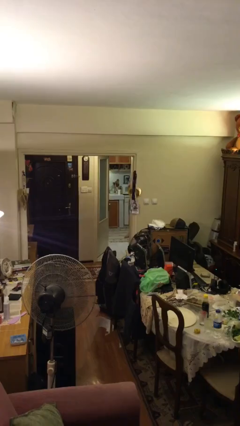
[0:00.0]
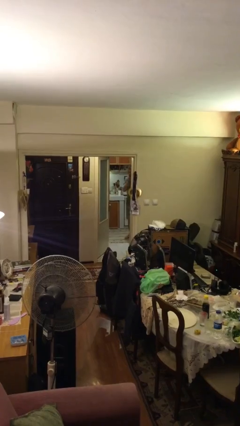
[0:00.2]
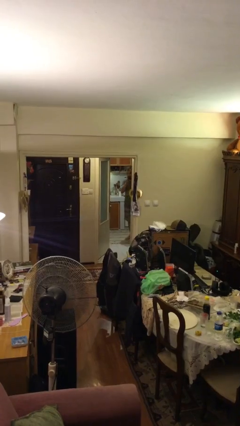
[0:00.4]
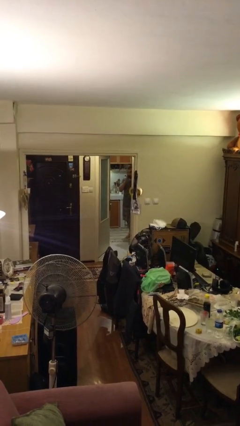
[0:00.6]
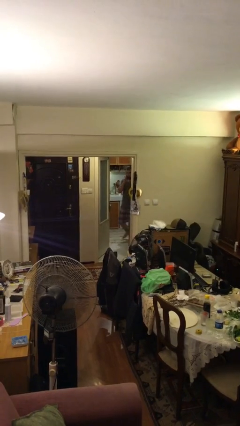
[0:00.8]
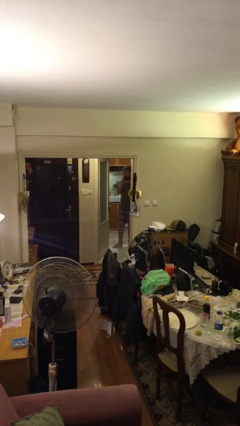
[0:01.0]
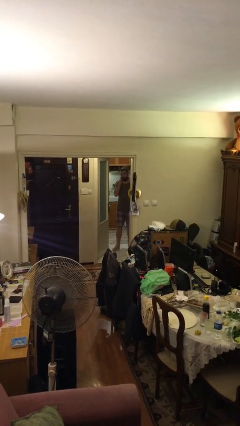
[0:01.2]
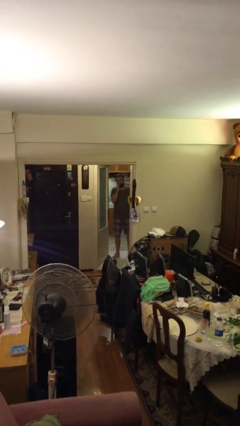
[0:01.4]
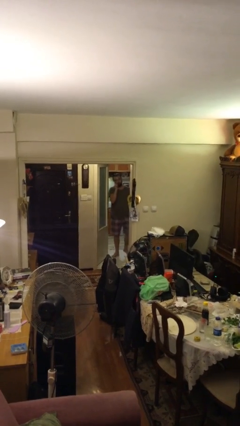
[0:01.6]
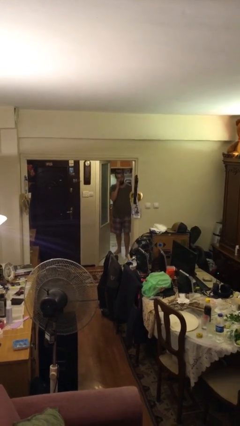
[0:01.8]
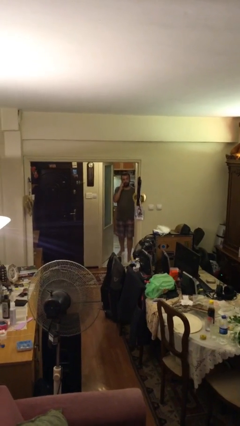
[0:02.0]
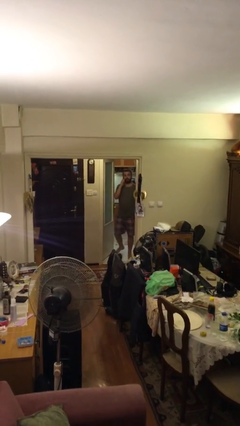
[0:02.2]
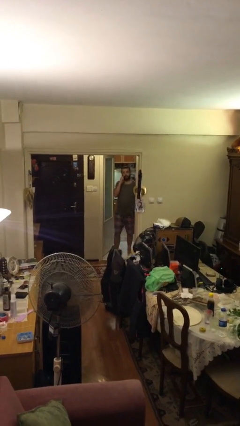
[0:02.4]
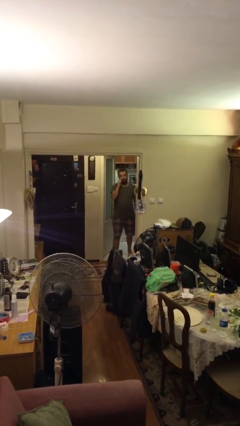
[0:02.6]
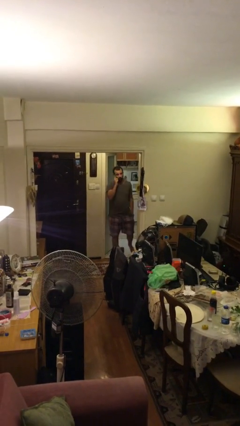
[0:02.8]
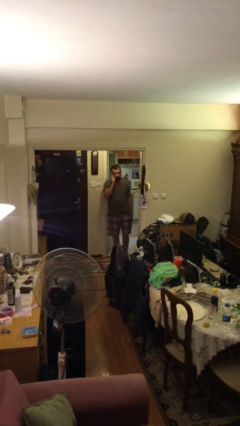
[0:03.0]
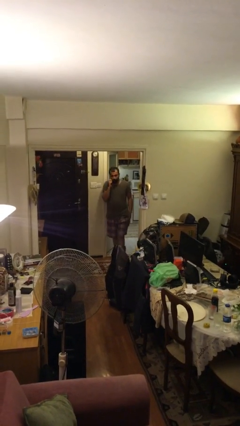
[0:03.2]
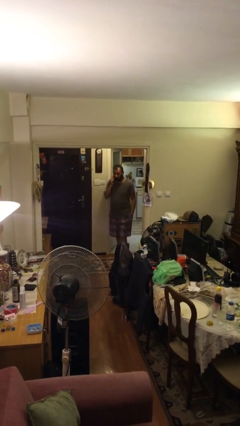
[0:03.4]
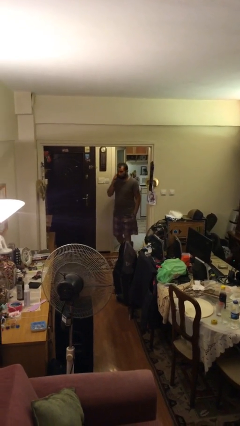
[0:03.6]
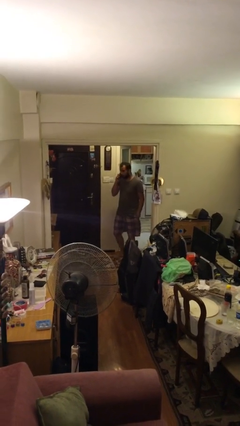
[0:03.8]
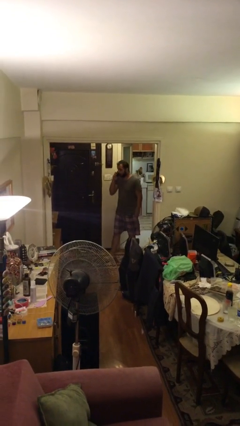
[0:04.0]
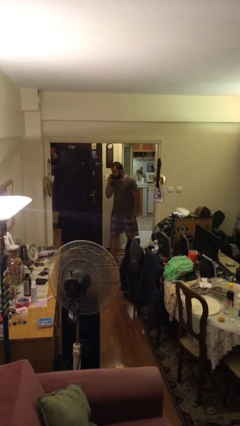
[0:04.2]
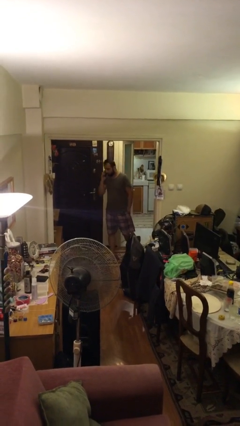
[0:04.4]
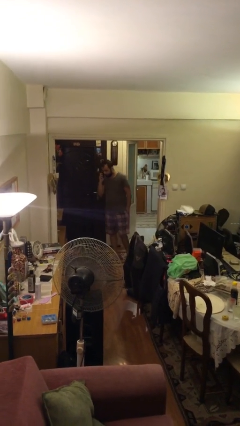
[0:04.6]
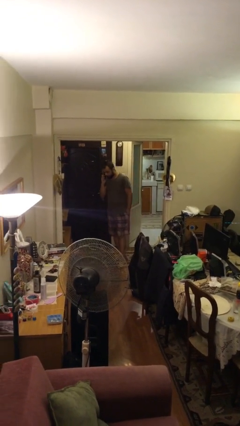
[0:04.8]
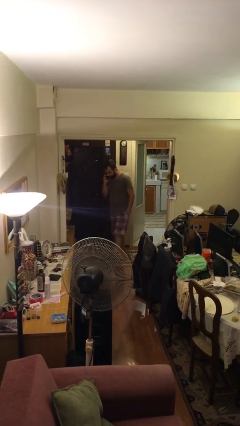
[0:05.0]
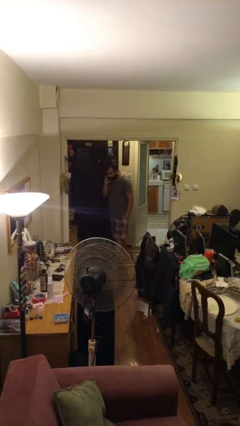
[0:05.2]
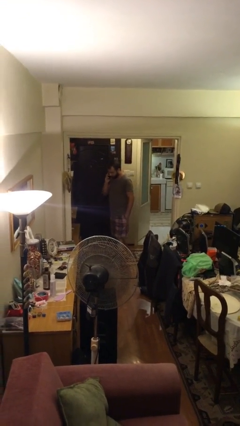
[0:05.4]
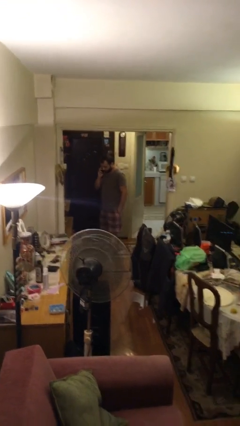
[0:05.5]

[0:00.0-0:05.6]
person enters scene through structure

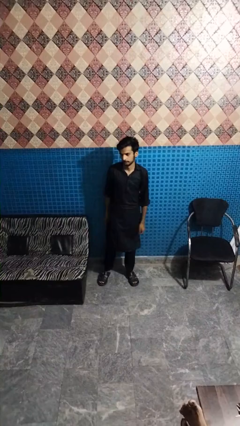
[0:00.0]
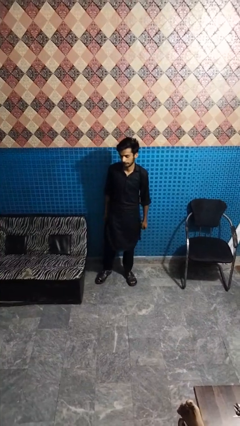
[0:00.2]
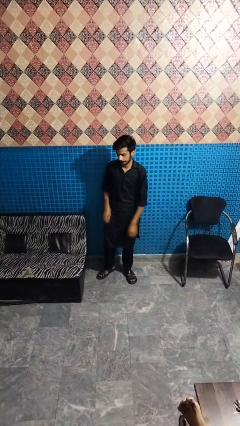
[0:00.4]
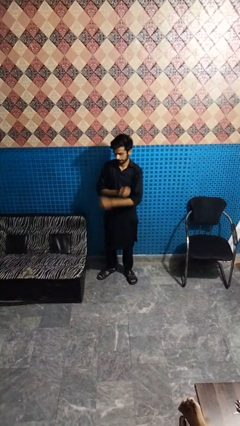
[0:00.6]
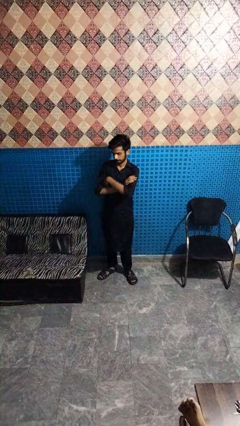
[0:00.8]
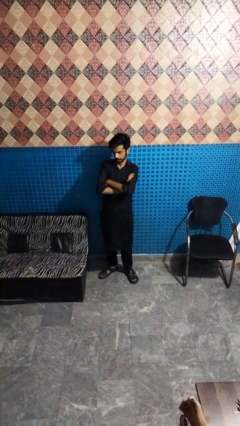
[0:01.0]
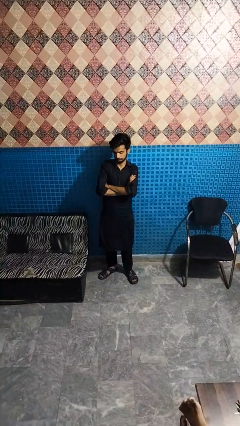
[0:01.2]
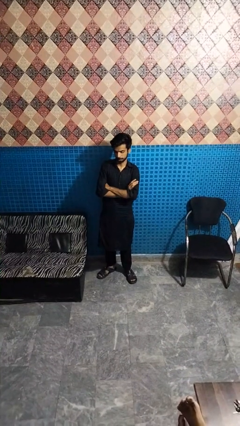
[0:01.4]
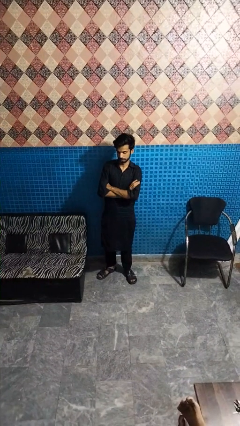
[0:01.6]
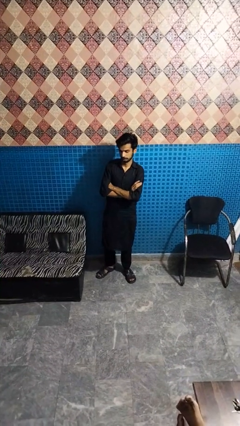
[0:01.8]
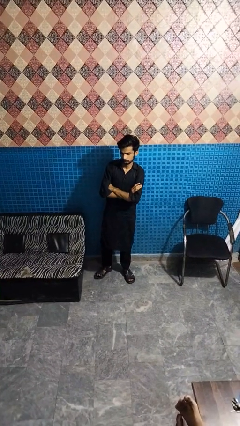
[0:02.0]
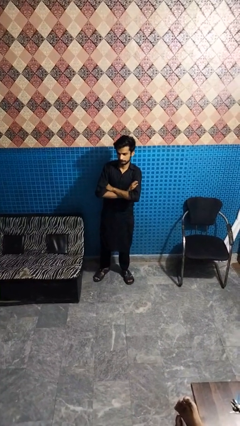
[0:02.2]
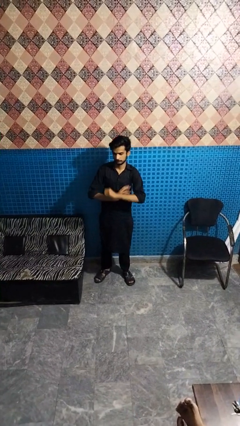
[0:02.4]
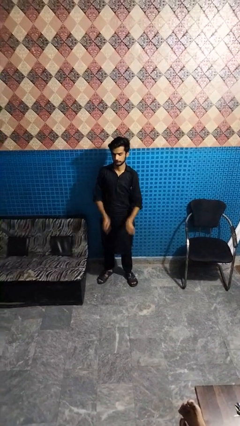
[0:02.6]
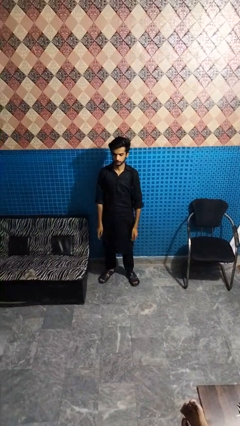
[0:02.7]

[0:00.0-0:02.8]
person crosses arms

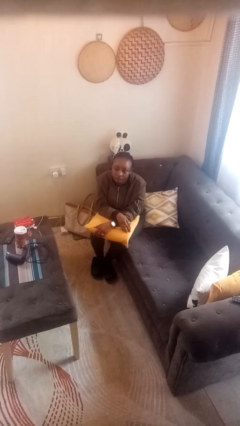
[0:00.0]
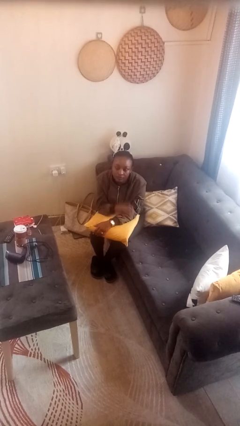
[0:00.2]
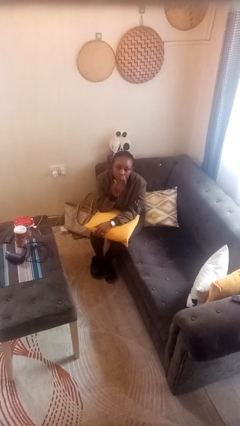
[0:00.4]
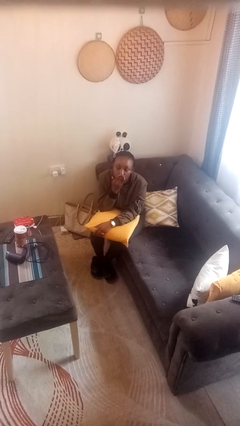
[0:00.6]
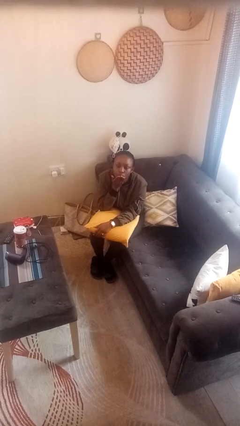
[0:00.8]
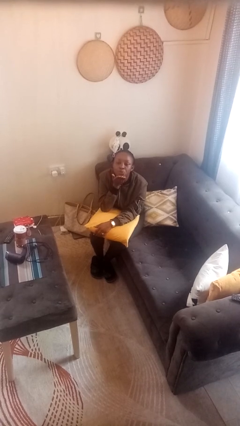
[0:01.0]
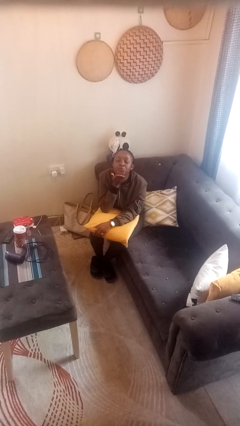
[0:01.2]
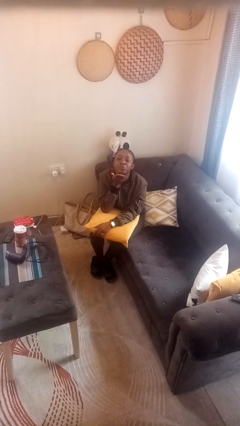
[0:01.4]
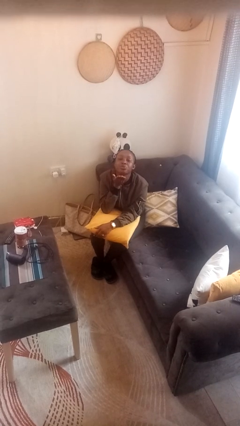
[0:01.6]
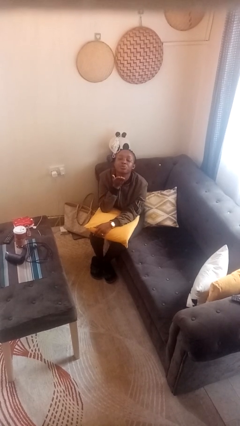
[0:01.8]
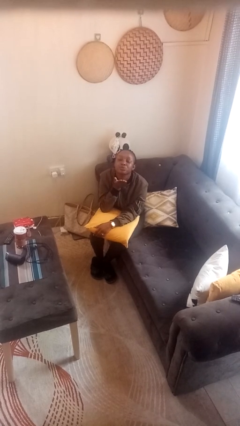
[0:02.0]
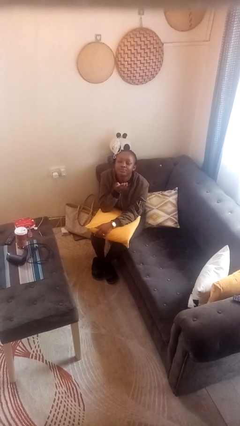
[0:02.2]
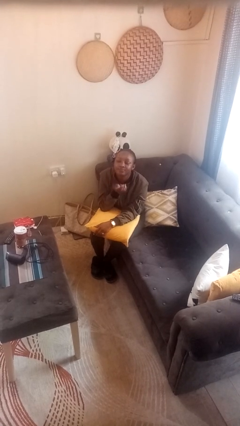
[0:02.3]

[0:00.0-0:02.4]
person gestures blow kiss

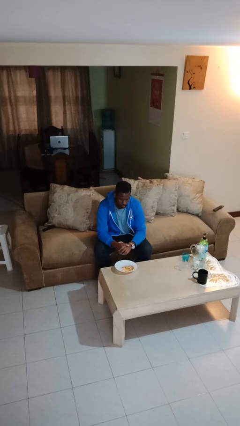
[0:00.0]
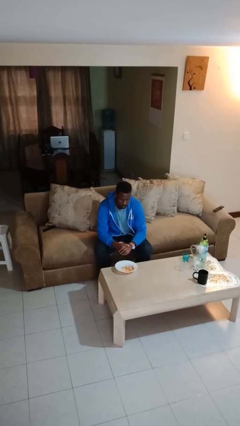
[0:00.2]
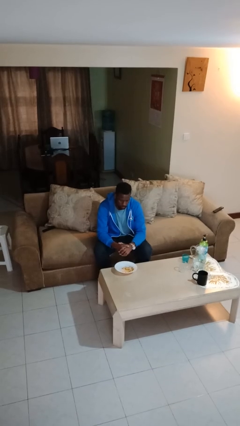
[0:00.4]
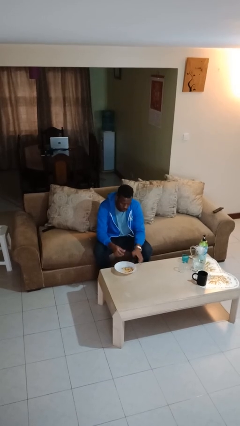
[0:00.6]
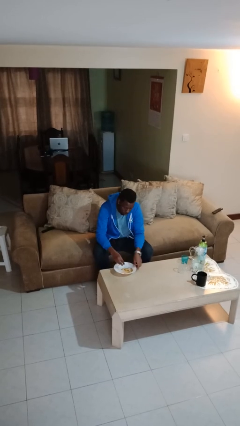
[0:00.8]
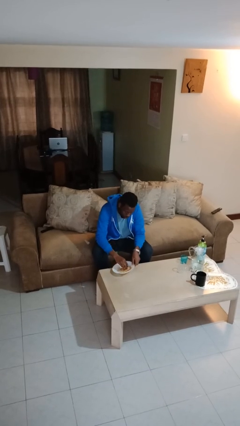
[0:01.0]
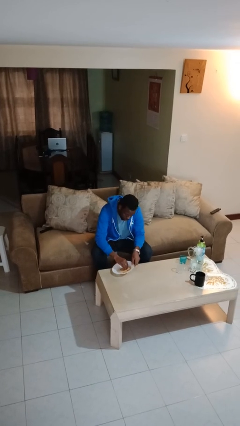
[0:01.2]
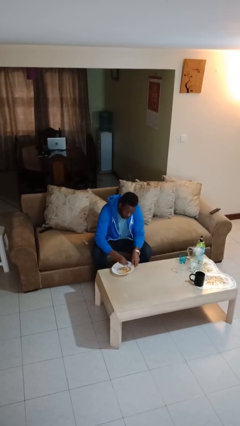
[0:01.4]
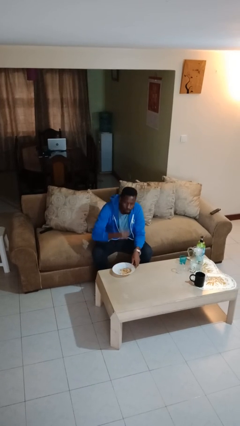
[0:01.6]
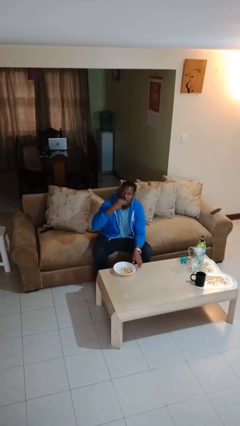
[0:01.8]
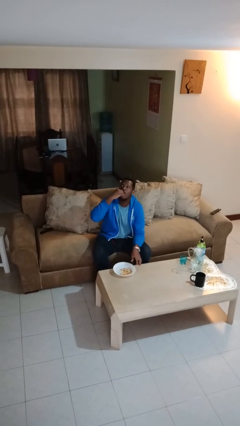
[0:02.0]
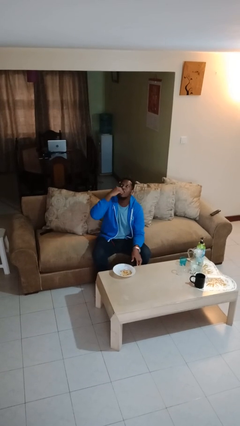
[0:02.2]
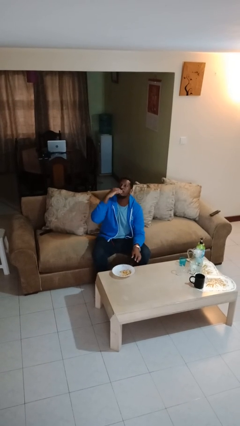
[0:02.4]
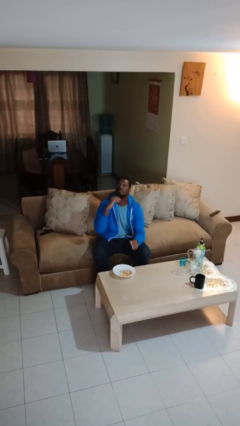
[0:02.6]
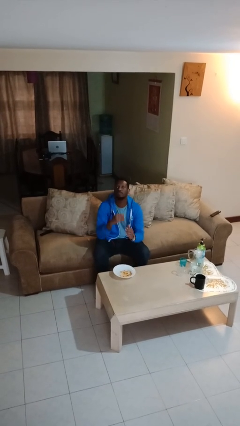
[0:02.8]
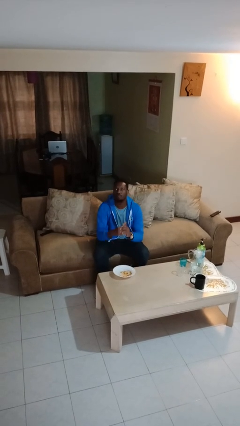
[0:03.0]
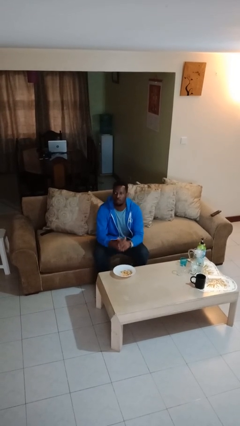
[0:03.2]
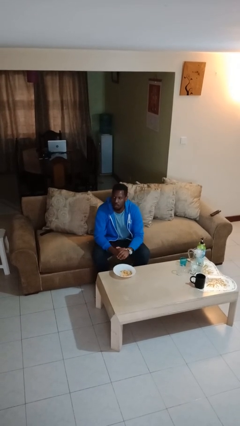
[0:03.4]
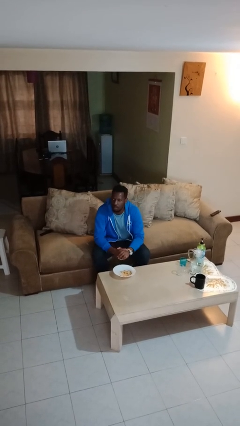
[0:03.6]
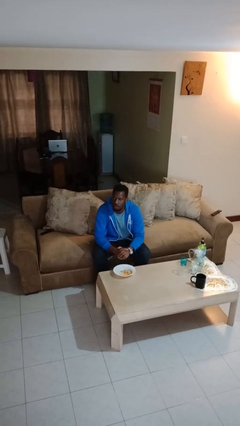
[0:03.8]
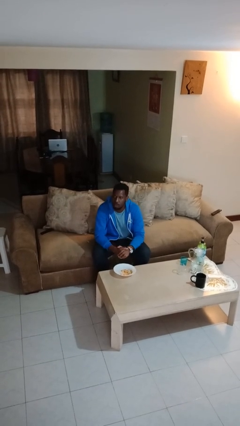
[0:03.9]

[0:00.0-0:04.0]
person eats with hands

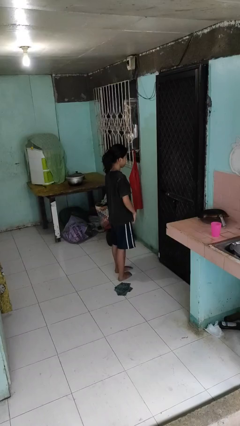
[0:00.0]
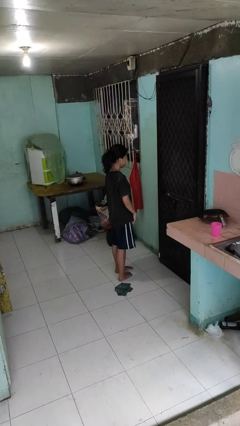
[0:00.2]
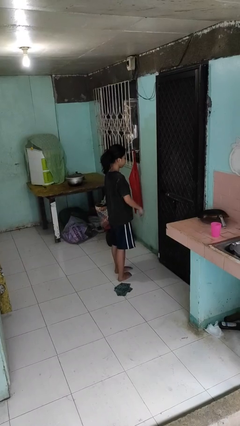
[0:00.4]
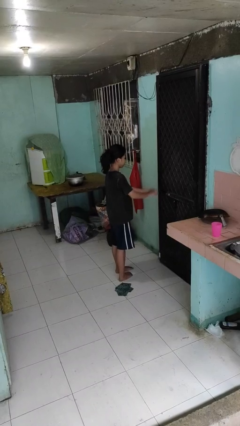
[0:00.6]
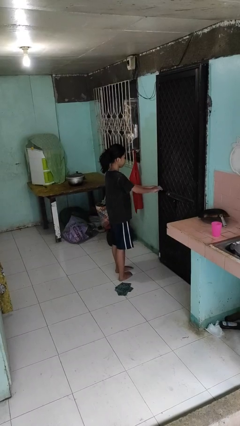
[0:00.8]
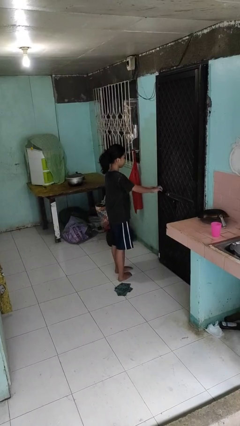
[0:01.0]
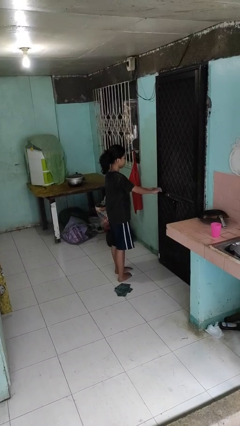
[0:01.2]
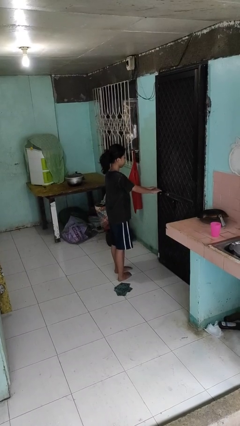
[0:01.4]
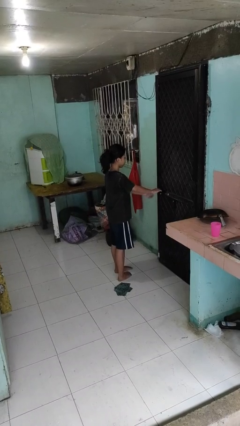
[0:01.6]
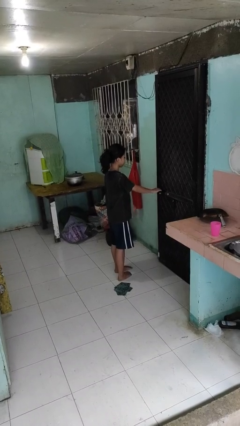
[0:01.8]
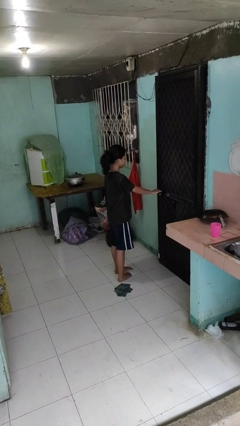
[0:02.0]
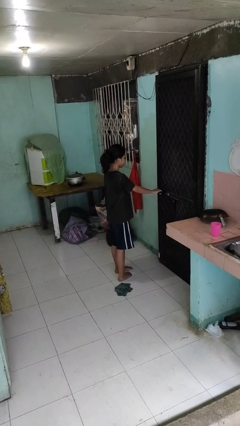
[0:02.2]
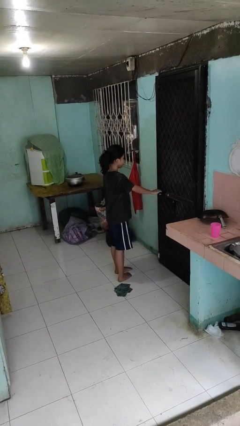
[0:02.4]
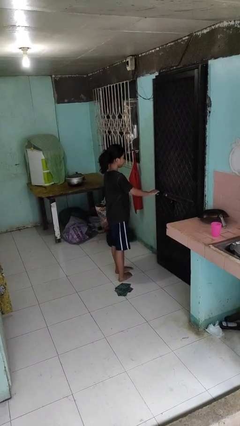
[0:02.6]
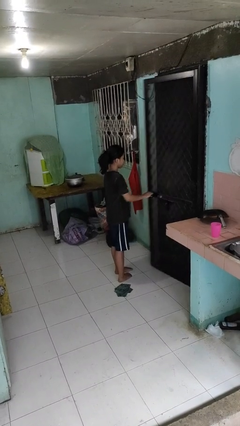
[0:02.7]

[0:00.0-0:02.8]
person unlocks door with keys
